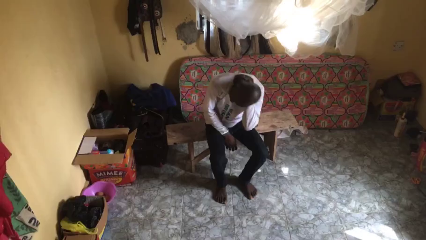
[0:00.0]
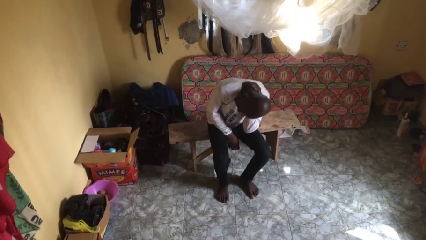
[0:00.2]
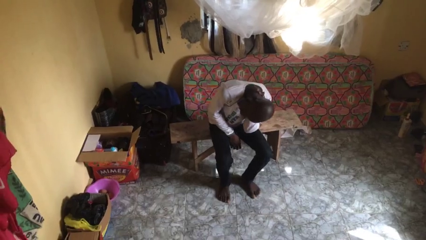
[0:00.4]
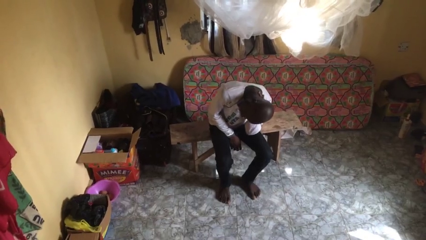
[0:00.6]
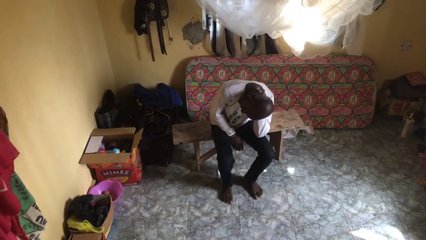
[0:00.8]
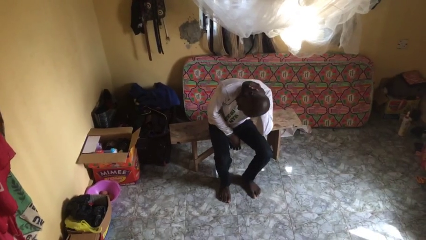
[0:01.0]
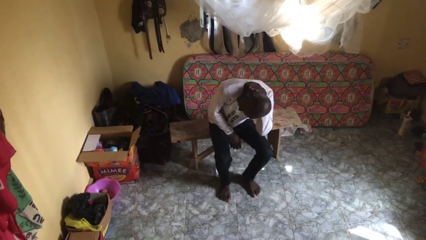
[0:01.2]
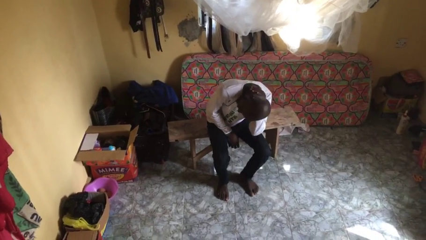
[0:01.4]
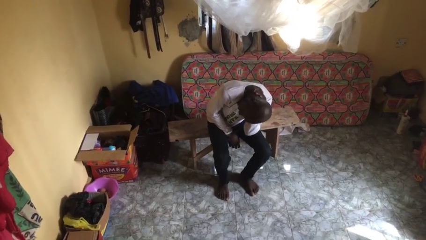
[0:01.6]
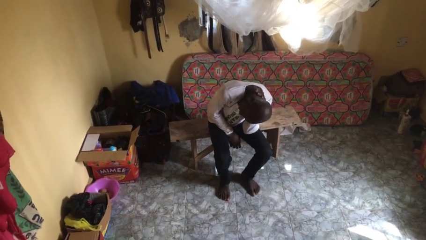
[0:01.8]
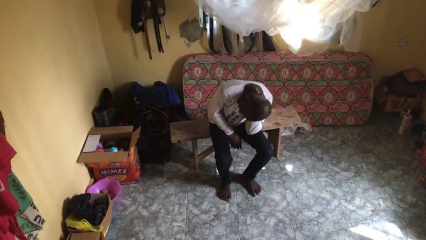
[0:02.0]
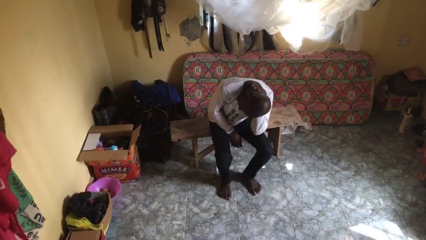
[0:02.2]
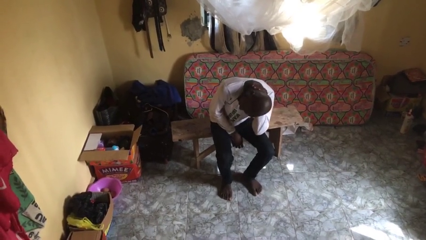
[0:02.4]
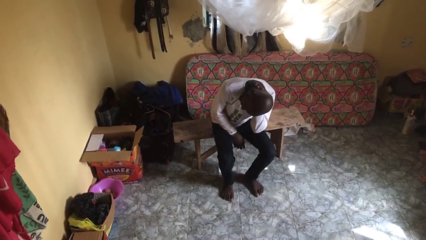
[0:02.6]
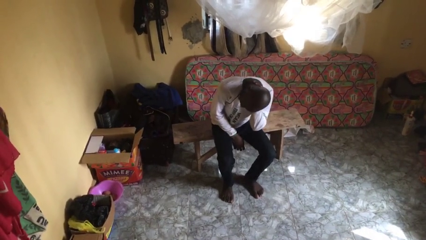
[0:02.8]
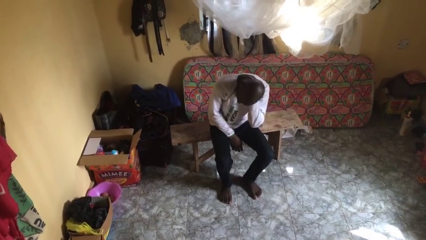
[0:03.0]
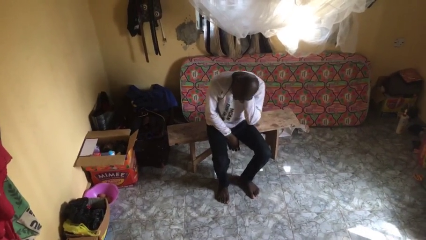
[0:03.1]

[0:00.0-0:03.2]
person rubs neck

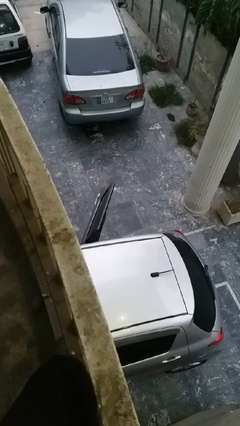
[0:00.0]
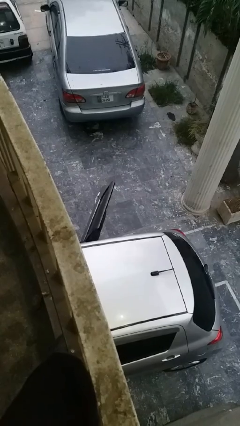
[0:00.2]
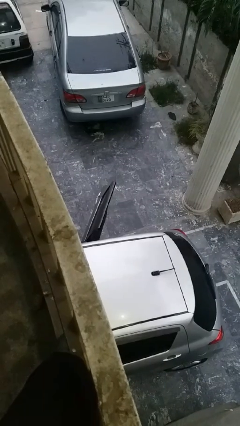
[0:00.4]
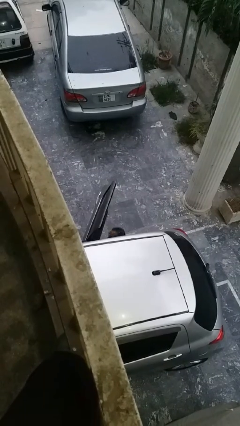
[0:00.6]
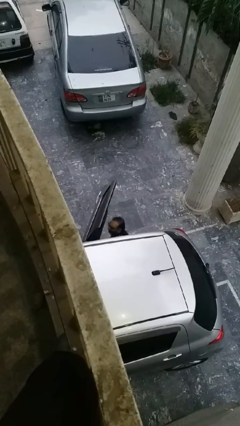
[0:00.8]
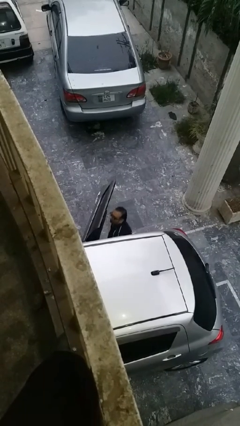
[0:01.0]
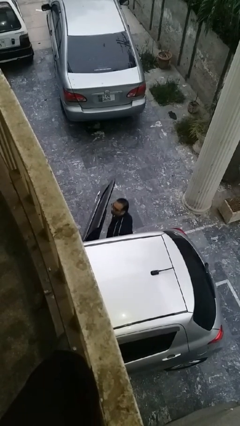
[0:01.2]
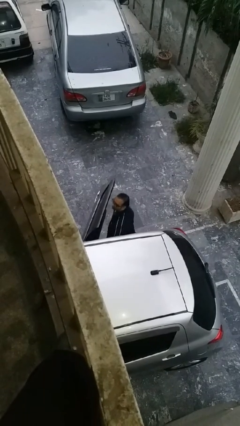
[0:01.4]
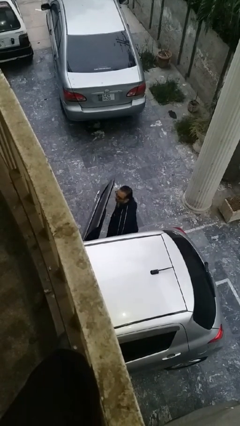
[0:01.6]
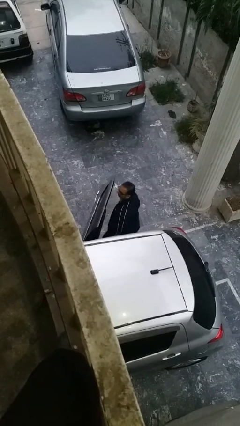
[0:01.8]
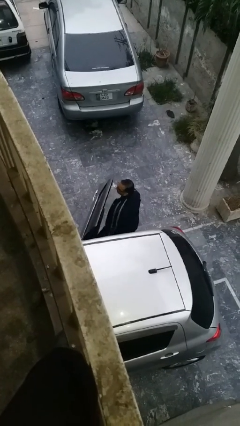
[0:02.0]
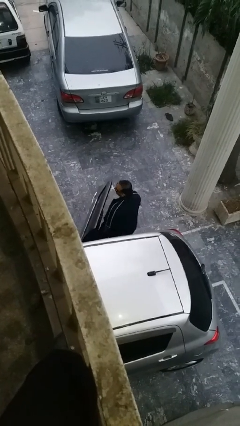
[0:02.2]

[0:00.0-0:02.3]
person exits car

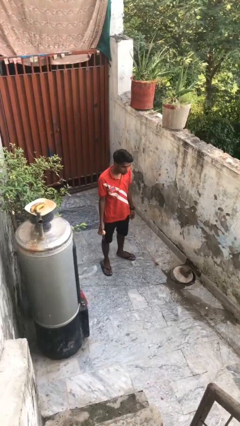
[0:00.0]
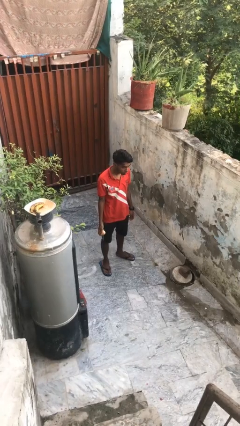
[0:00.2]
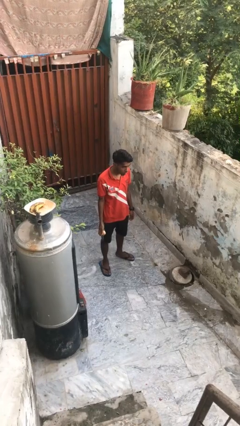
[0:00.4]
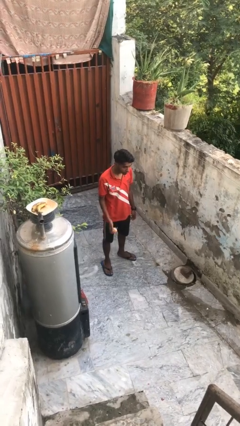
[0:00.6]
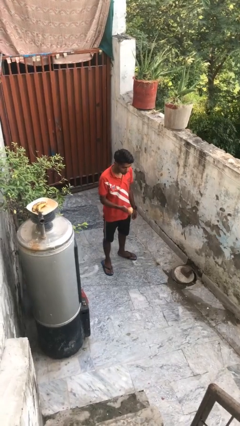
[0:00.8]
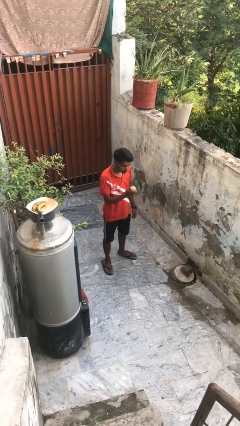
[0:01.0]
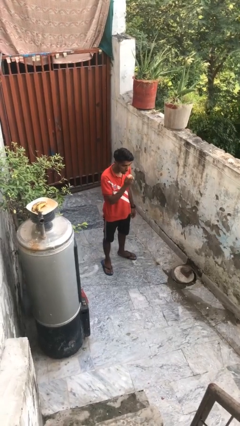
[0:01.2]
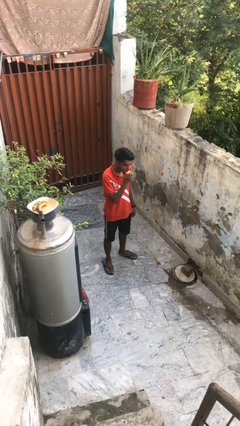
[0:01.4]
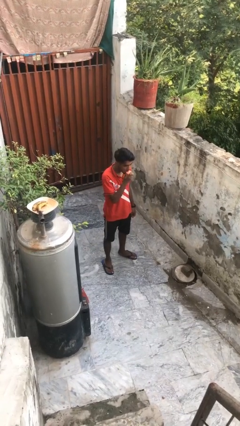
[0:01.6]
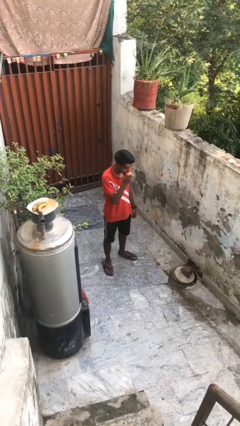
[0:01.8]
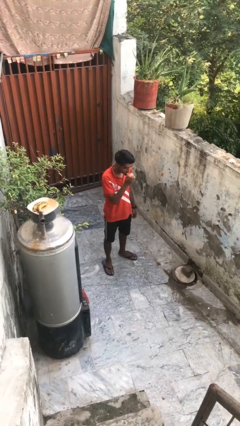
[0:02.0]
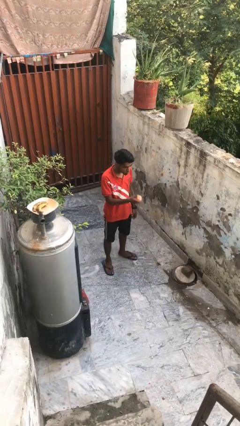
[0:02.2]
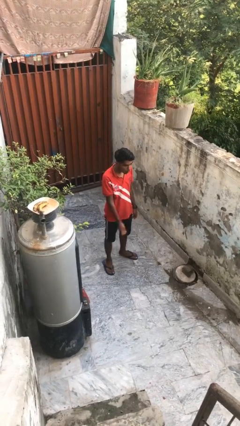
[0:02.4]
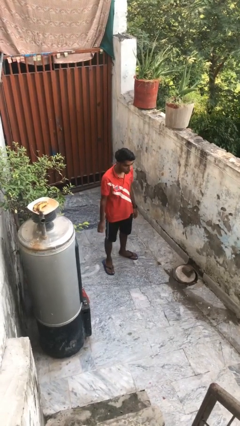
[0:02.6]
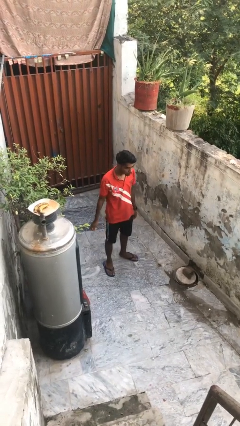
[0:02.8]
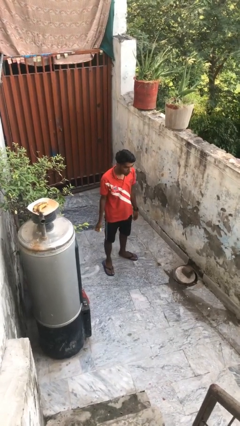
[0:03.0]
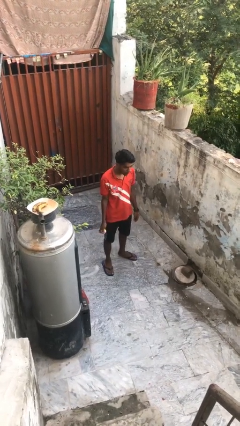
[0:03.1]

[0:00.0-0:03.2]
person eats apple

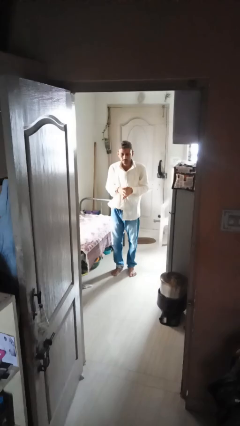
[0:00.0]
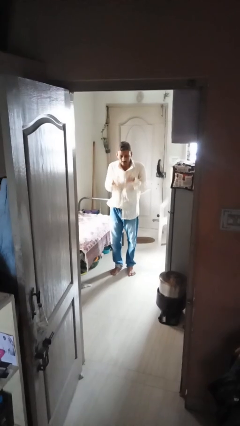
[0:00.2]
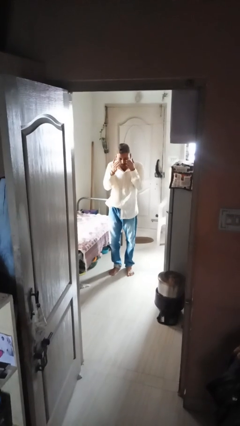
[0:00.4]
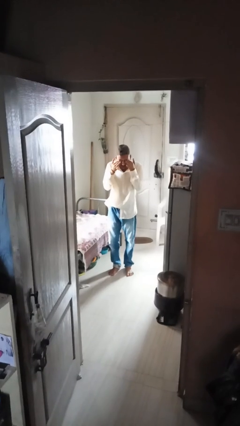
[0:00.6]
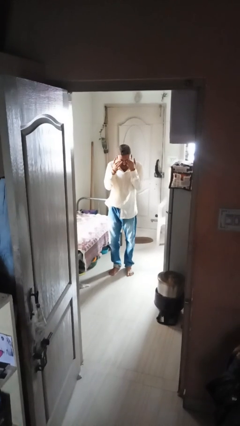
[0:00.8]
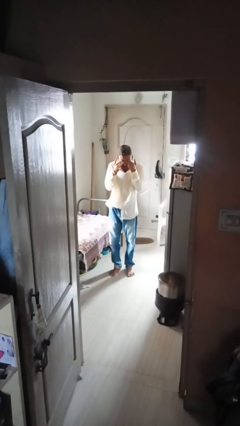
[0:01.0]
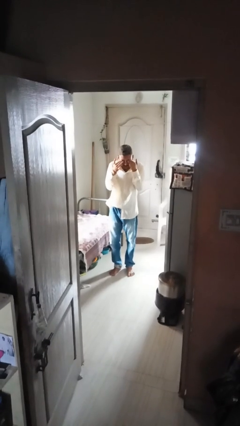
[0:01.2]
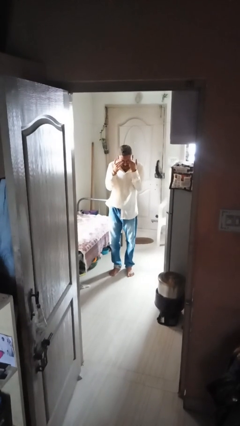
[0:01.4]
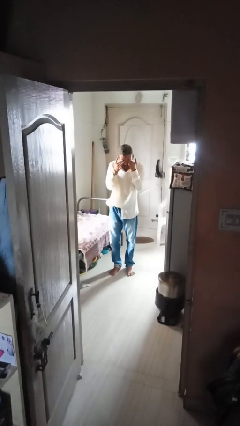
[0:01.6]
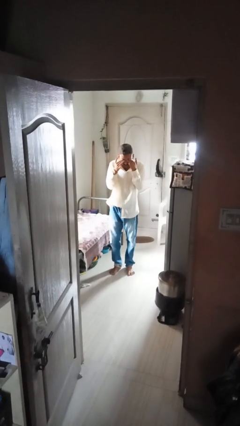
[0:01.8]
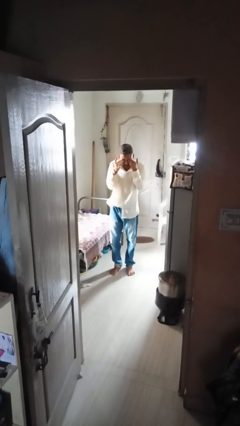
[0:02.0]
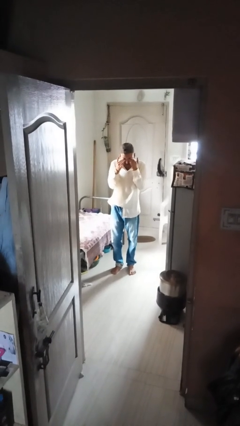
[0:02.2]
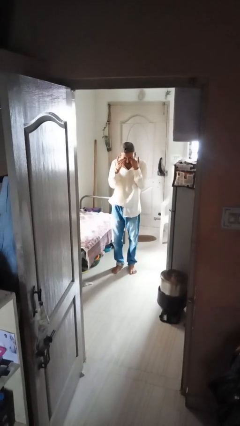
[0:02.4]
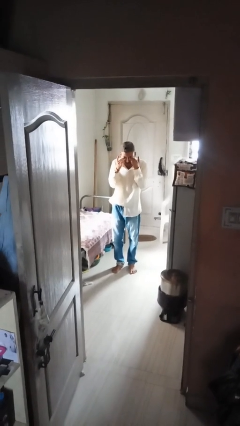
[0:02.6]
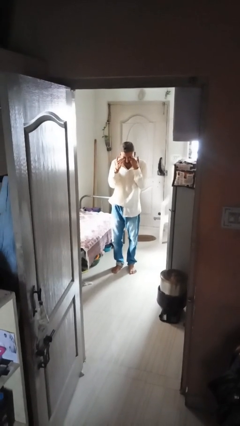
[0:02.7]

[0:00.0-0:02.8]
person rubs eyes

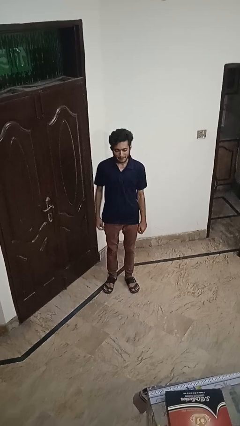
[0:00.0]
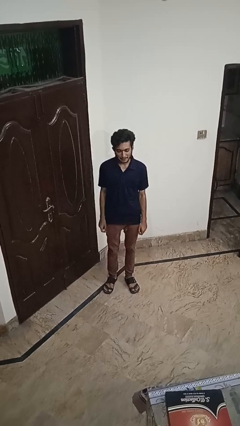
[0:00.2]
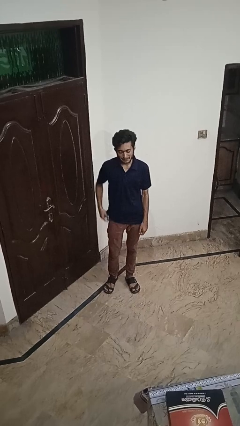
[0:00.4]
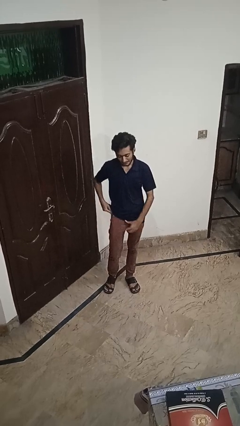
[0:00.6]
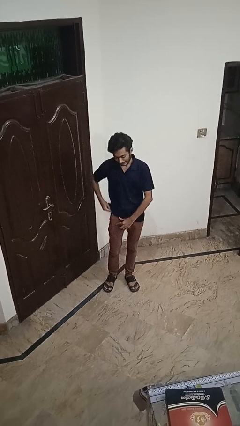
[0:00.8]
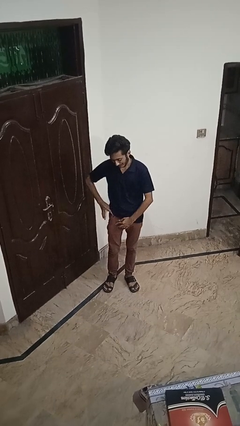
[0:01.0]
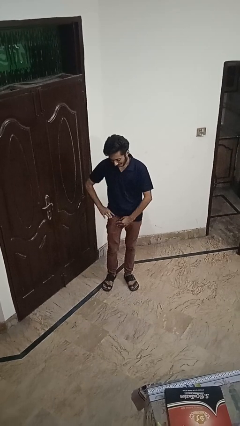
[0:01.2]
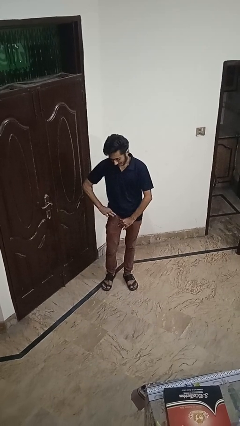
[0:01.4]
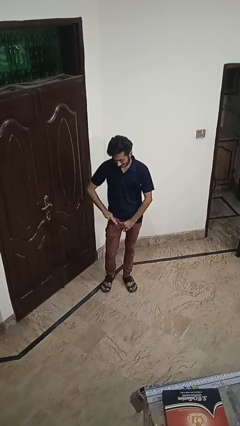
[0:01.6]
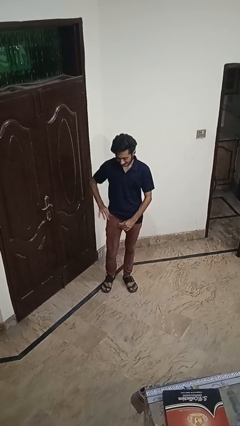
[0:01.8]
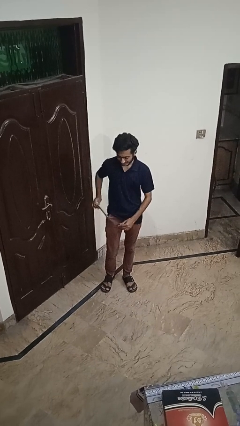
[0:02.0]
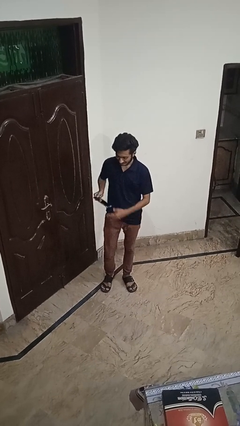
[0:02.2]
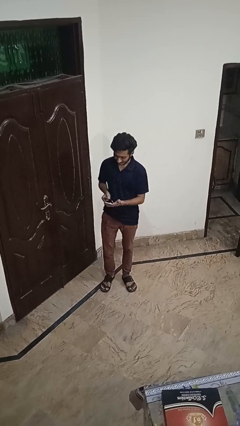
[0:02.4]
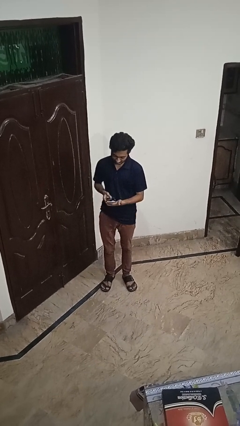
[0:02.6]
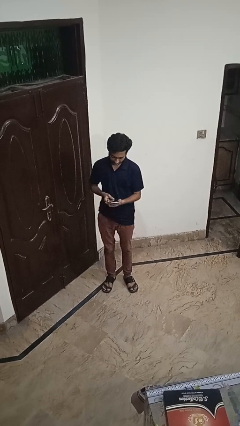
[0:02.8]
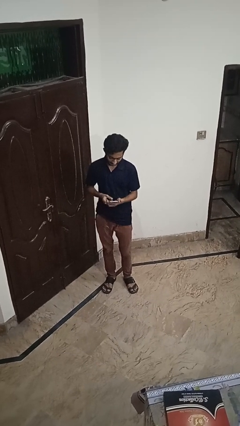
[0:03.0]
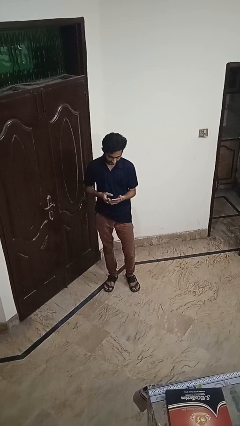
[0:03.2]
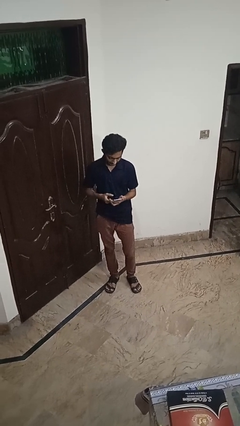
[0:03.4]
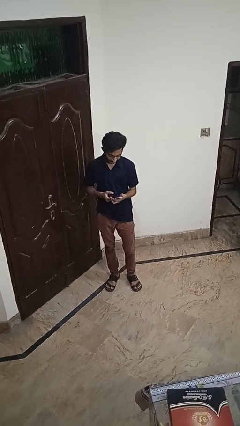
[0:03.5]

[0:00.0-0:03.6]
person takes phone from pocket

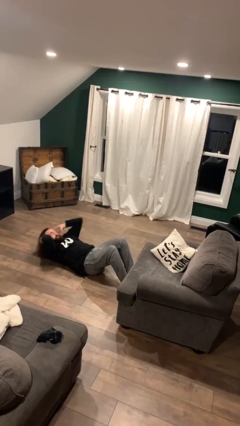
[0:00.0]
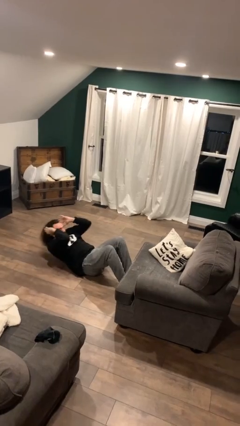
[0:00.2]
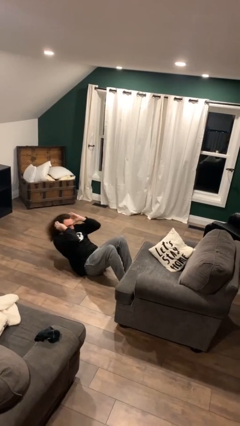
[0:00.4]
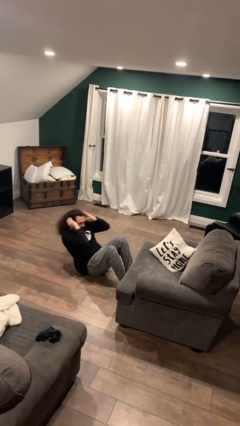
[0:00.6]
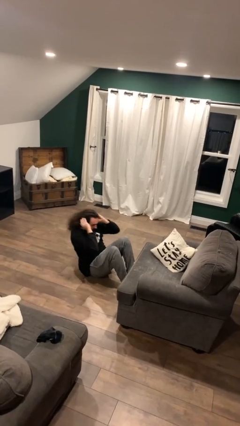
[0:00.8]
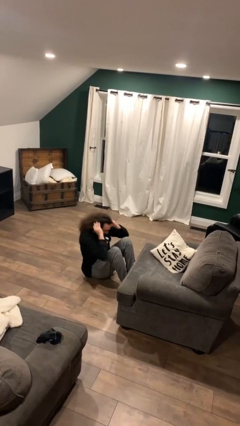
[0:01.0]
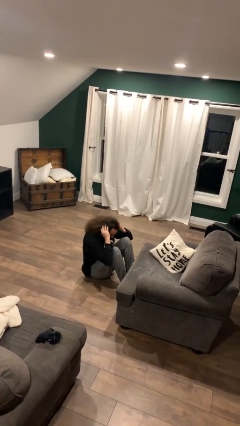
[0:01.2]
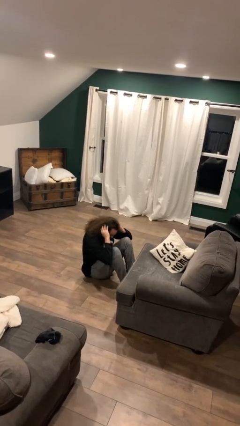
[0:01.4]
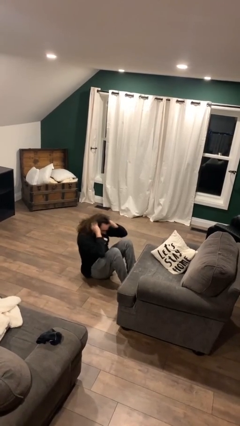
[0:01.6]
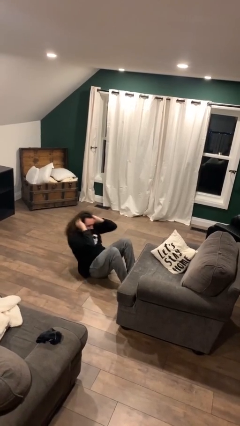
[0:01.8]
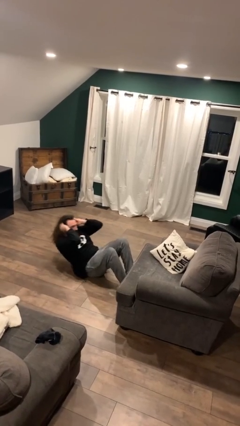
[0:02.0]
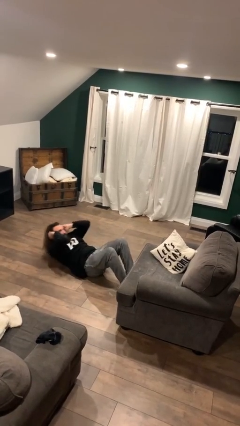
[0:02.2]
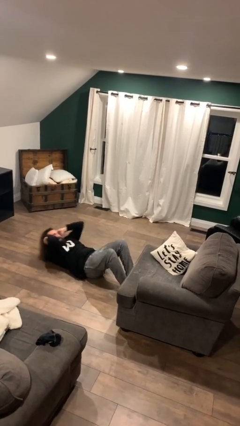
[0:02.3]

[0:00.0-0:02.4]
person exercises with situp
